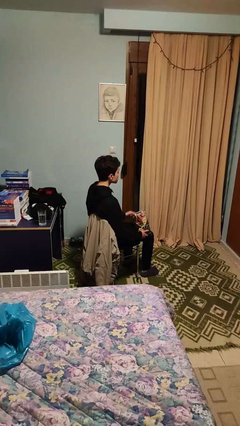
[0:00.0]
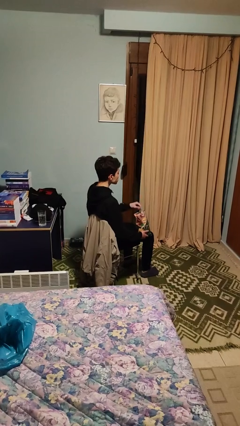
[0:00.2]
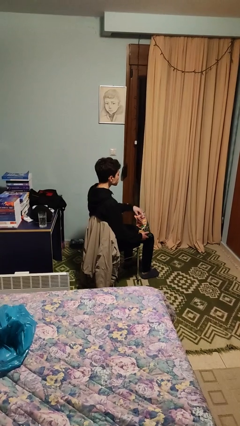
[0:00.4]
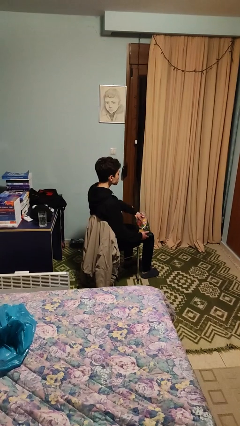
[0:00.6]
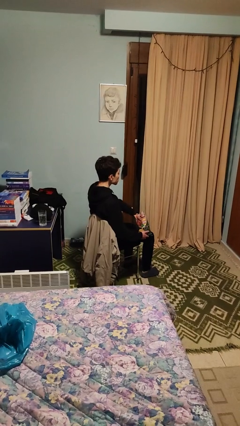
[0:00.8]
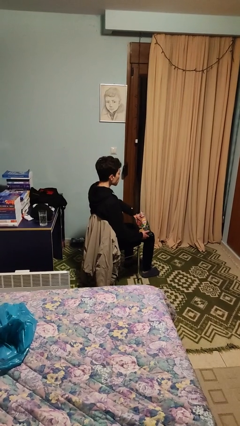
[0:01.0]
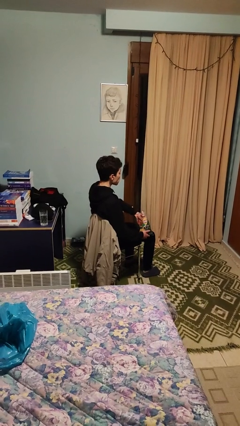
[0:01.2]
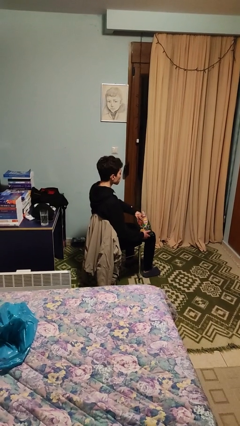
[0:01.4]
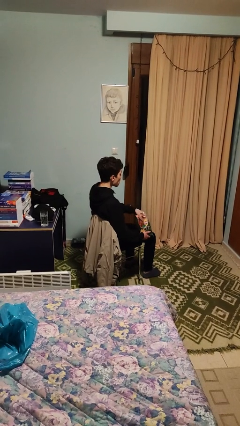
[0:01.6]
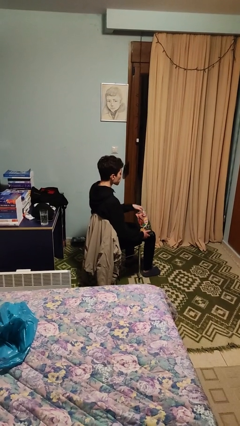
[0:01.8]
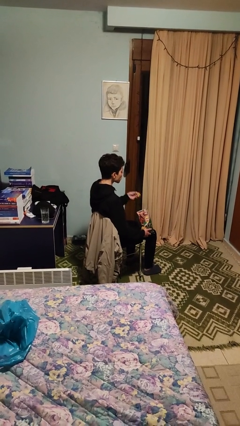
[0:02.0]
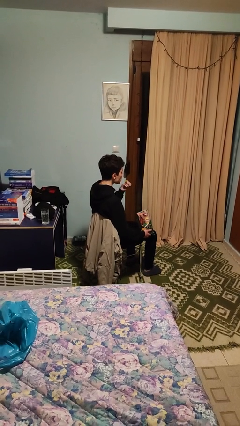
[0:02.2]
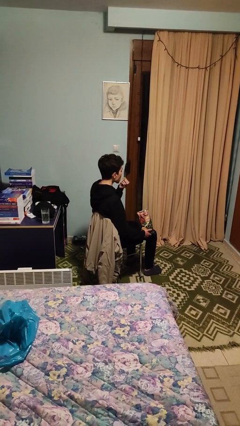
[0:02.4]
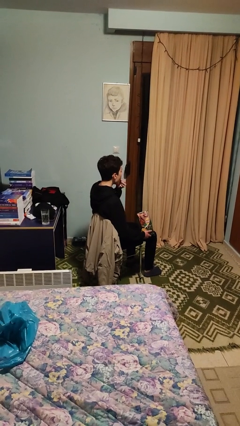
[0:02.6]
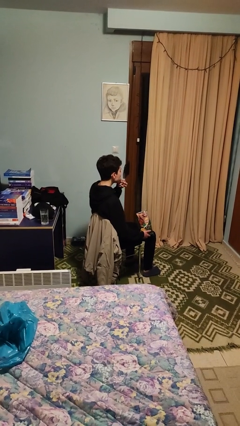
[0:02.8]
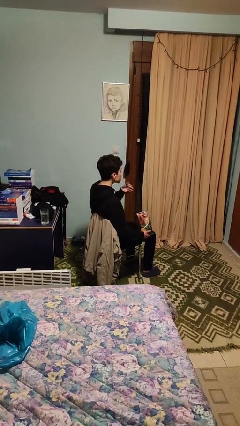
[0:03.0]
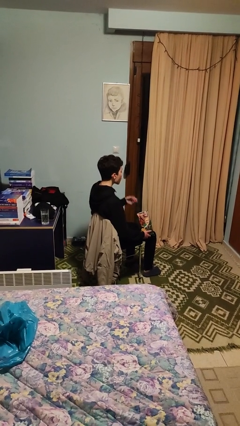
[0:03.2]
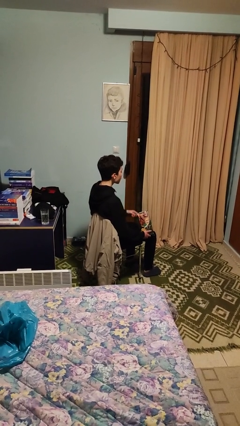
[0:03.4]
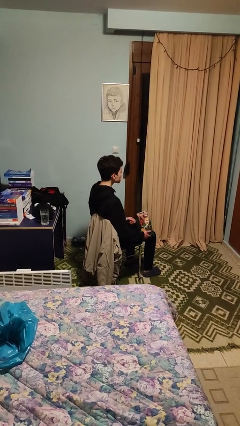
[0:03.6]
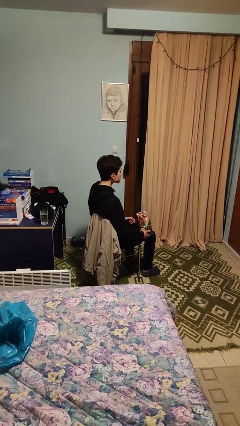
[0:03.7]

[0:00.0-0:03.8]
person eats snack from bag

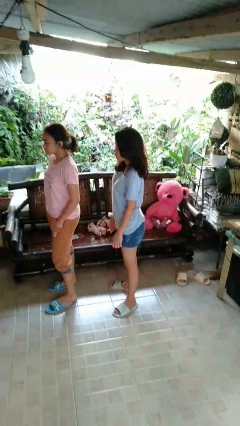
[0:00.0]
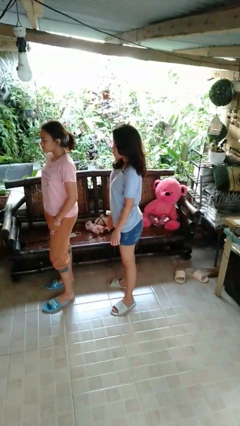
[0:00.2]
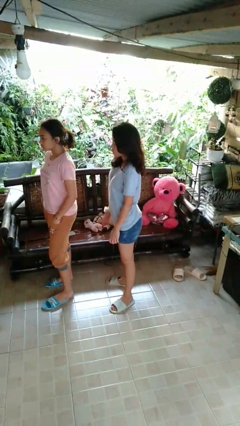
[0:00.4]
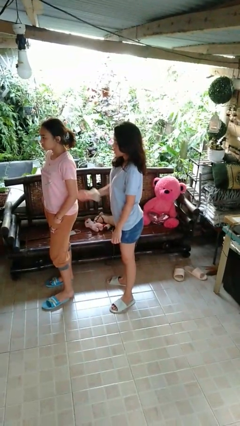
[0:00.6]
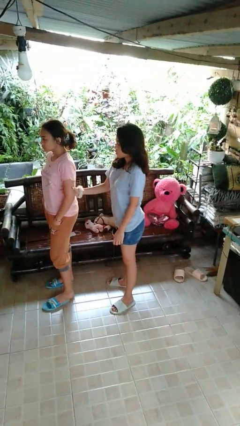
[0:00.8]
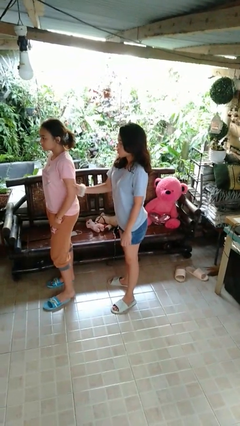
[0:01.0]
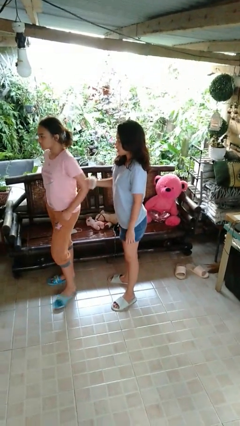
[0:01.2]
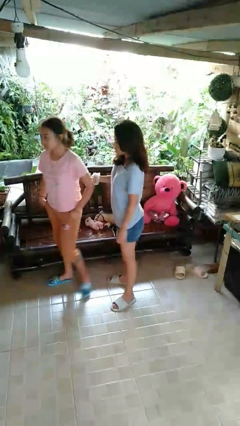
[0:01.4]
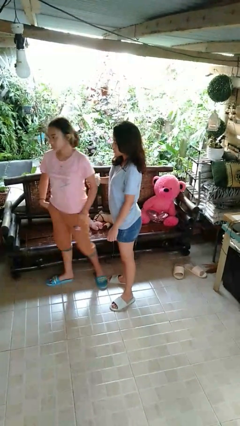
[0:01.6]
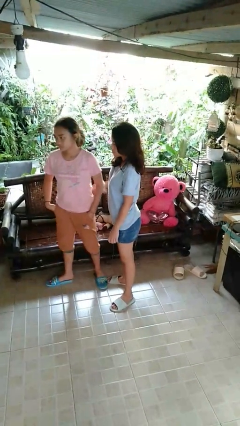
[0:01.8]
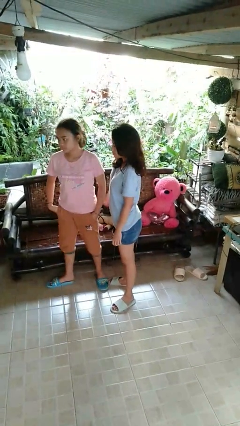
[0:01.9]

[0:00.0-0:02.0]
person grabs person by bicep

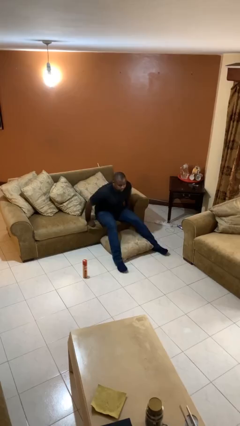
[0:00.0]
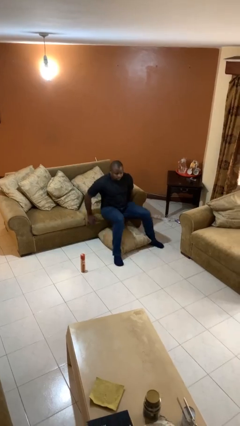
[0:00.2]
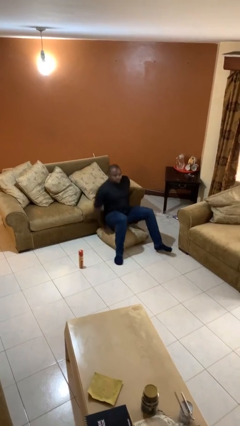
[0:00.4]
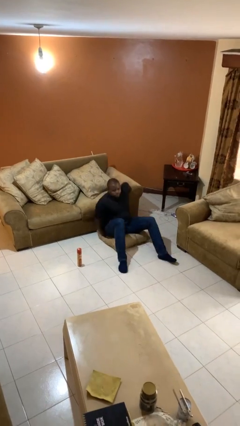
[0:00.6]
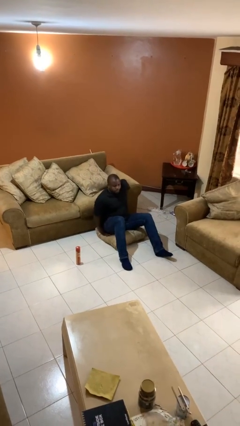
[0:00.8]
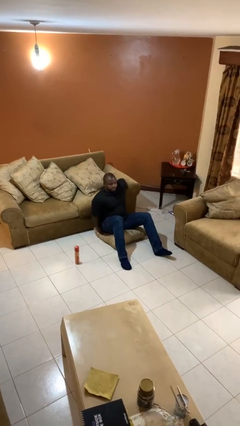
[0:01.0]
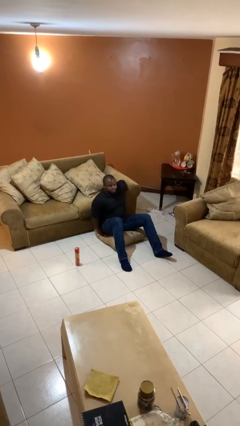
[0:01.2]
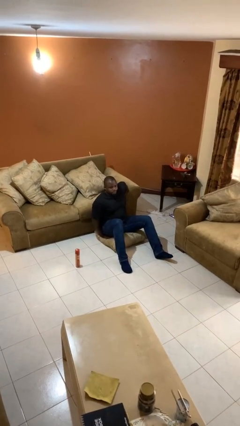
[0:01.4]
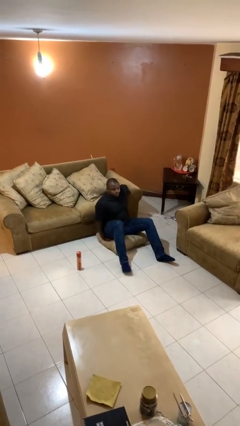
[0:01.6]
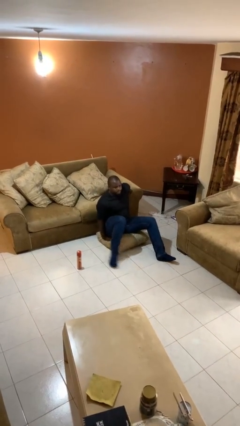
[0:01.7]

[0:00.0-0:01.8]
person falls from chair

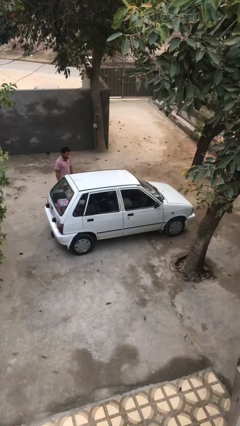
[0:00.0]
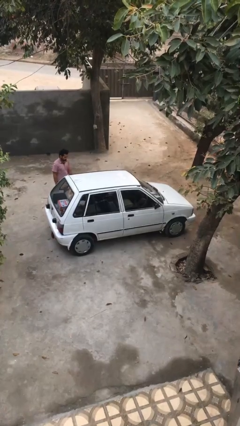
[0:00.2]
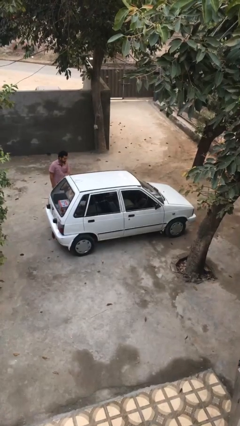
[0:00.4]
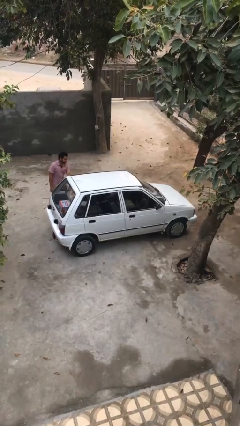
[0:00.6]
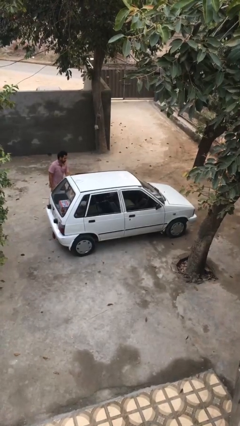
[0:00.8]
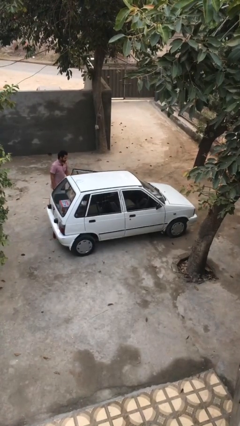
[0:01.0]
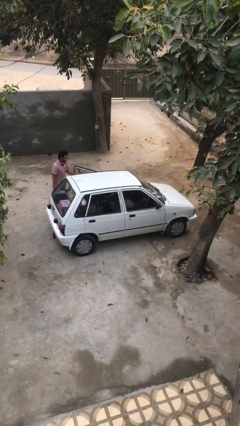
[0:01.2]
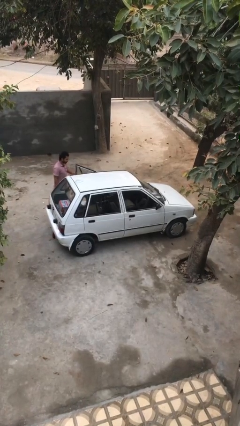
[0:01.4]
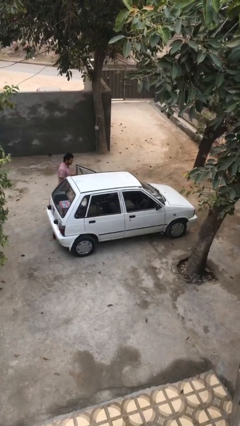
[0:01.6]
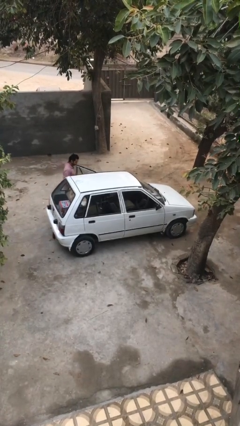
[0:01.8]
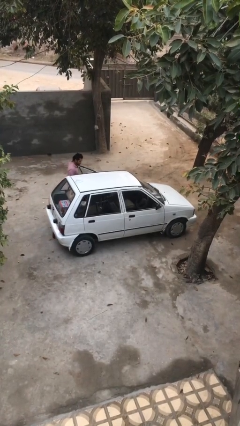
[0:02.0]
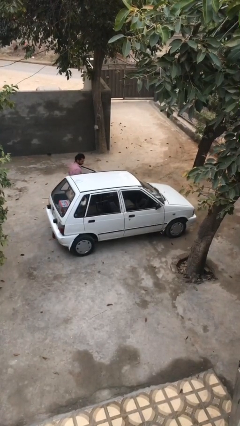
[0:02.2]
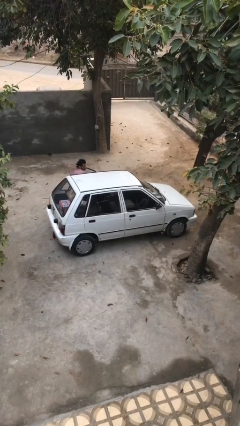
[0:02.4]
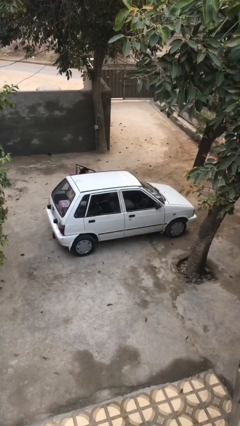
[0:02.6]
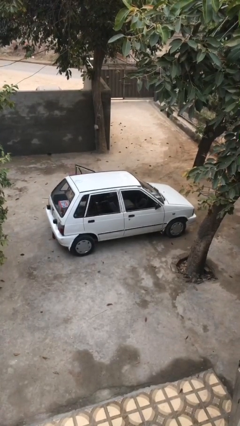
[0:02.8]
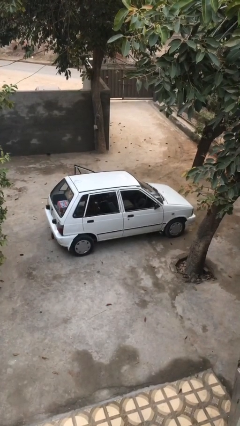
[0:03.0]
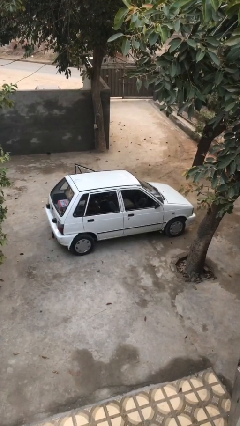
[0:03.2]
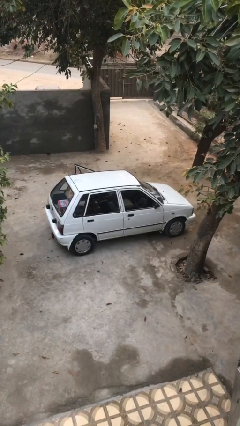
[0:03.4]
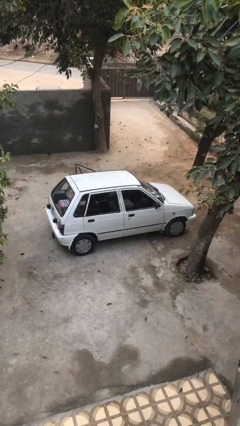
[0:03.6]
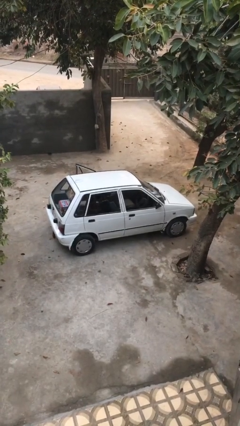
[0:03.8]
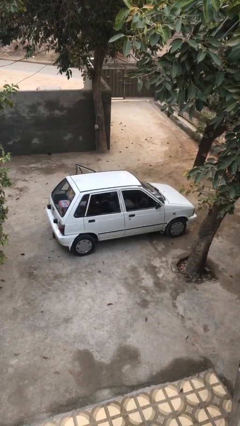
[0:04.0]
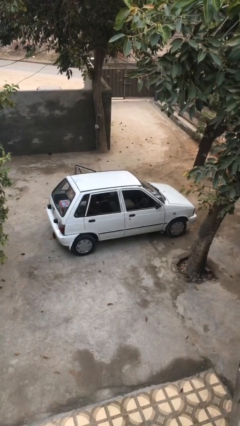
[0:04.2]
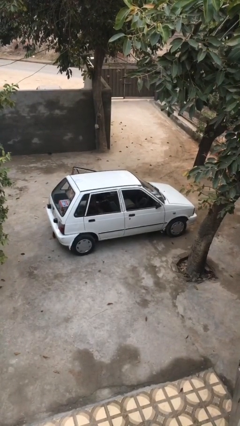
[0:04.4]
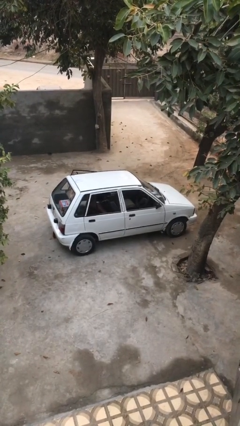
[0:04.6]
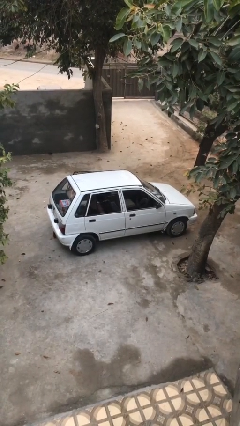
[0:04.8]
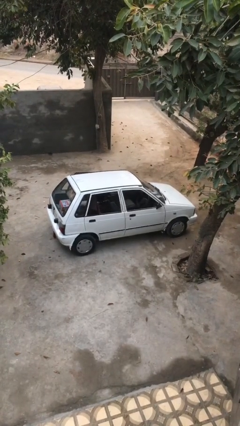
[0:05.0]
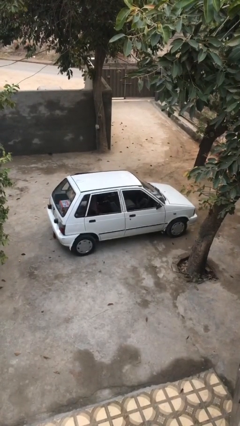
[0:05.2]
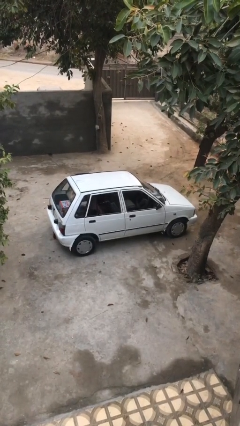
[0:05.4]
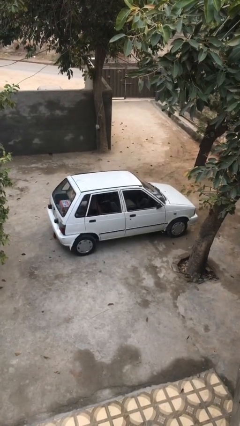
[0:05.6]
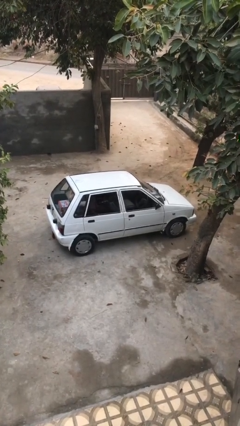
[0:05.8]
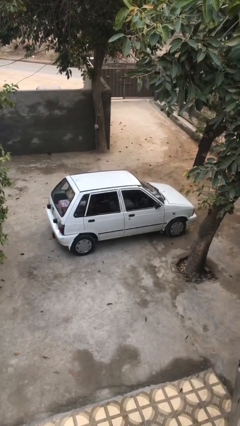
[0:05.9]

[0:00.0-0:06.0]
car picks up person

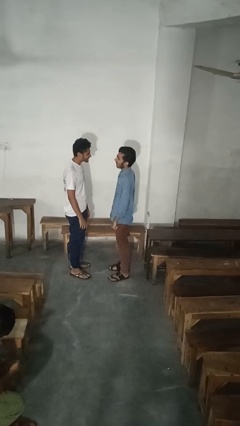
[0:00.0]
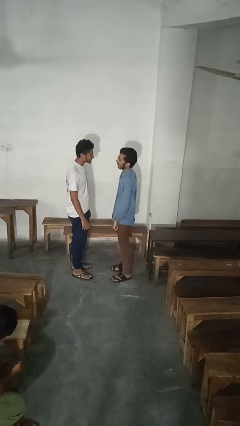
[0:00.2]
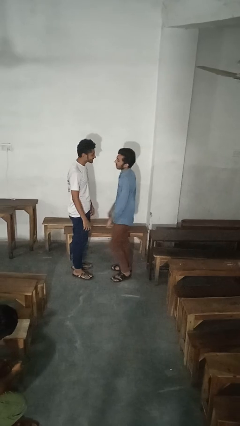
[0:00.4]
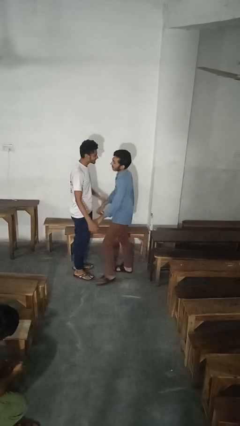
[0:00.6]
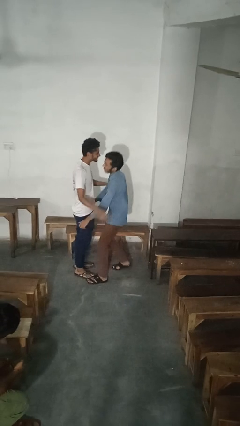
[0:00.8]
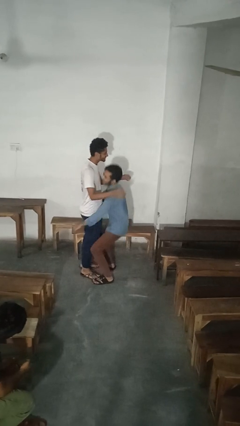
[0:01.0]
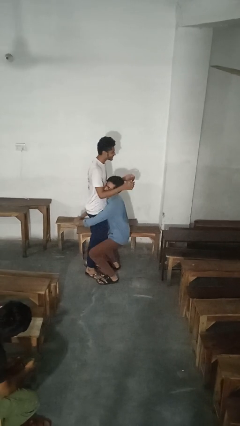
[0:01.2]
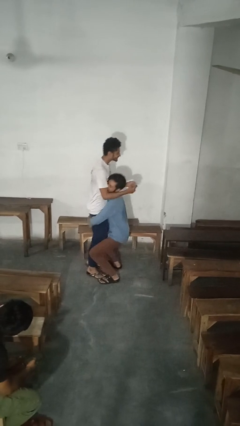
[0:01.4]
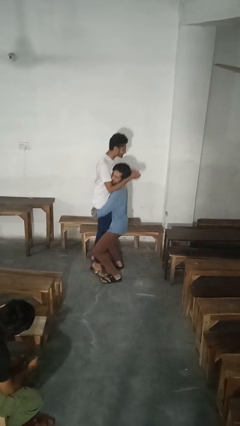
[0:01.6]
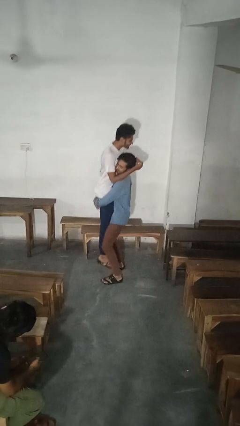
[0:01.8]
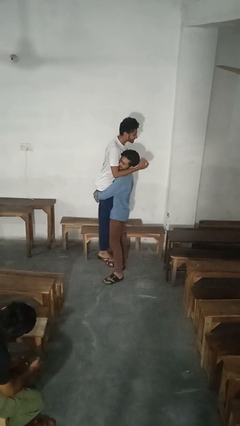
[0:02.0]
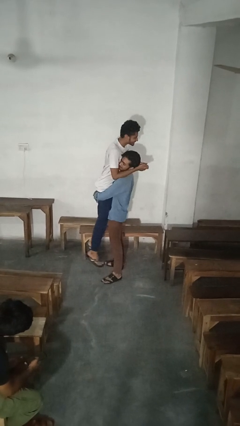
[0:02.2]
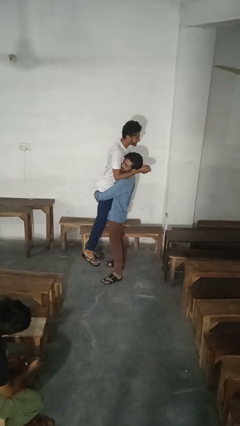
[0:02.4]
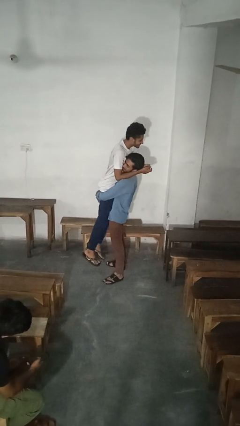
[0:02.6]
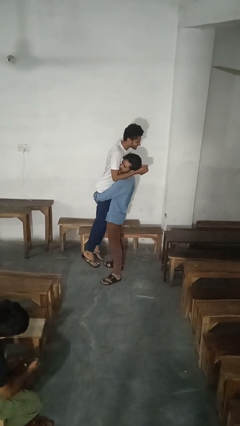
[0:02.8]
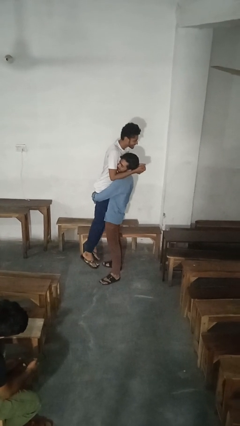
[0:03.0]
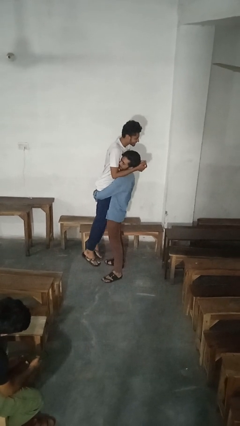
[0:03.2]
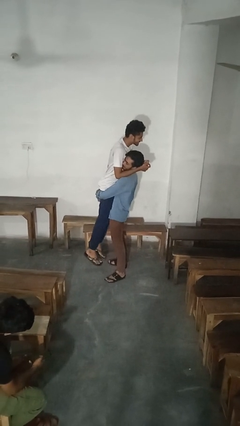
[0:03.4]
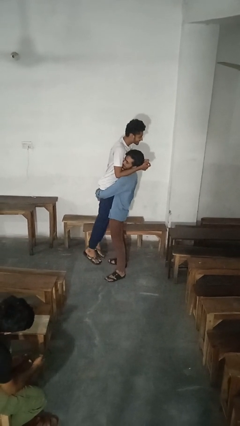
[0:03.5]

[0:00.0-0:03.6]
person picks up person
